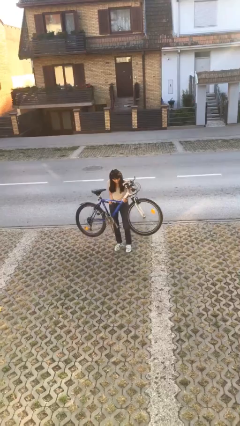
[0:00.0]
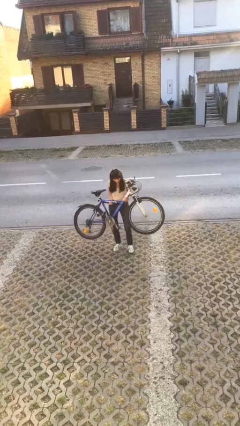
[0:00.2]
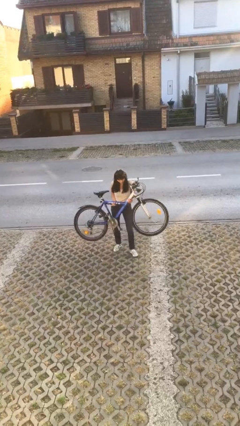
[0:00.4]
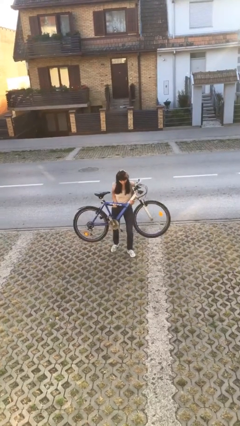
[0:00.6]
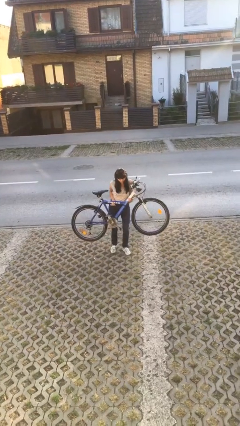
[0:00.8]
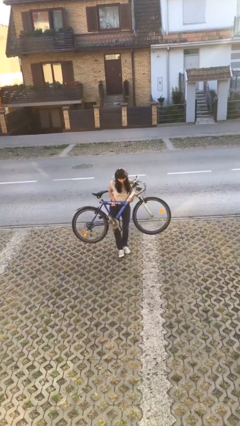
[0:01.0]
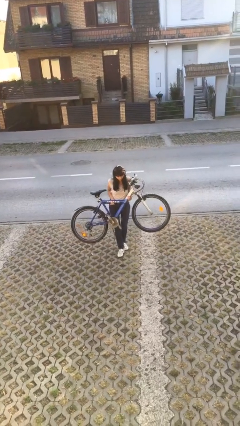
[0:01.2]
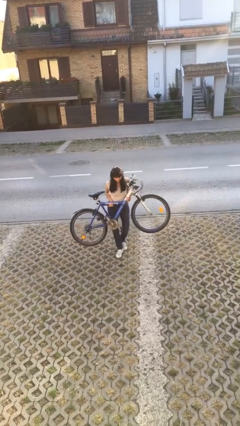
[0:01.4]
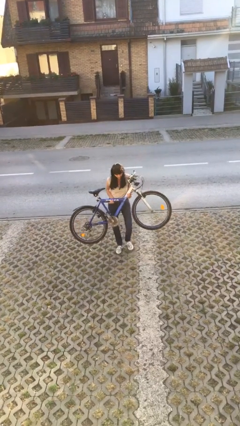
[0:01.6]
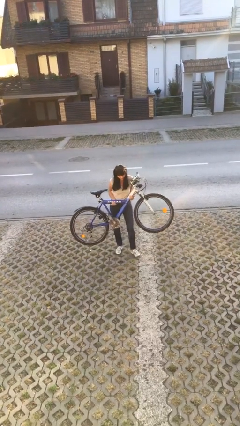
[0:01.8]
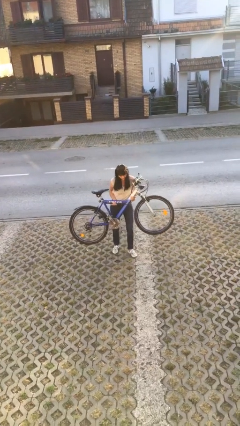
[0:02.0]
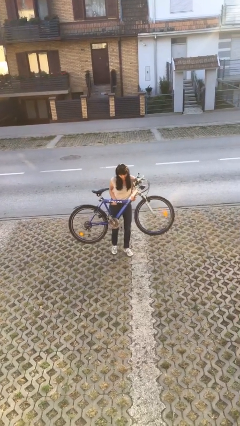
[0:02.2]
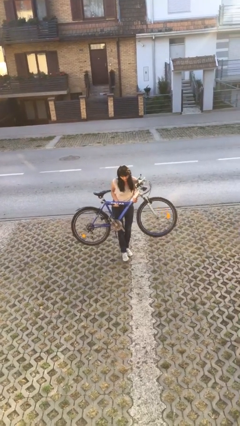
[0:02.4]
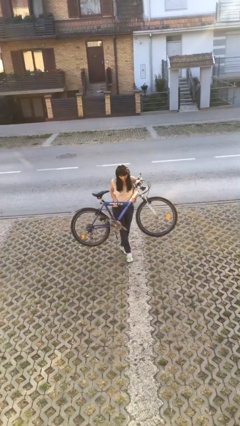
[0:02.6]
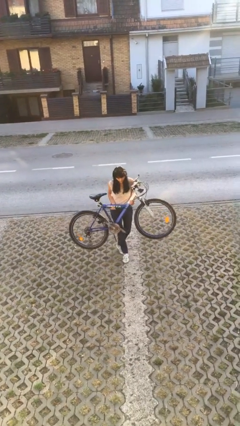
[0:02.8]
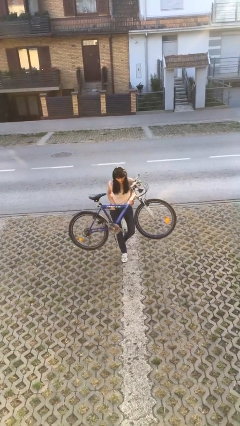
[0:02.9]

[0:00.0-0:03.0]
person carries heavy object

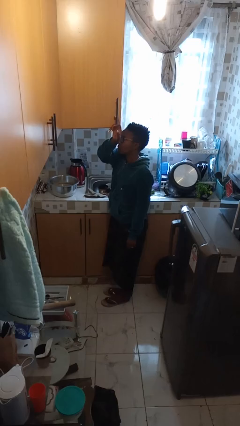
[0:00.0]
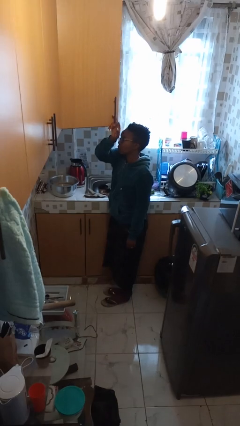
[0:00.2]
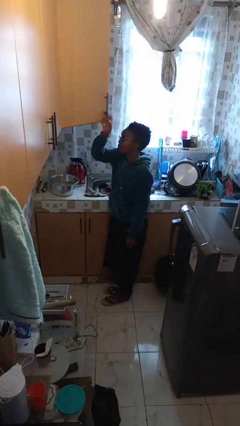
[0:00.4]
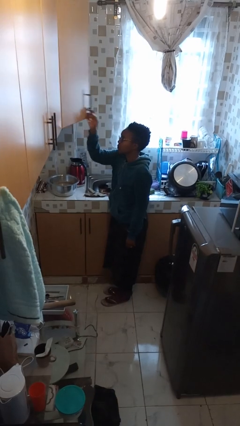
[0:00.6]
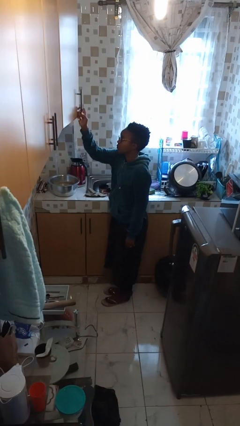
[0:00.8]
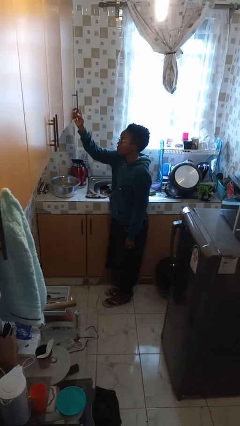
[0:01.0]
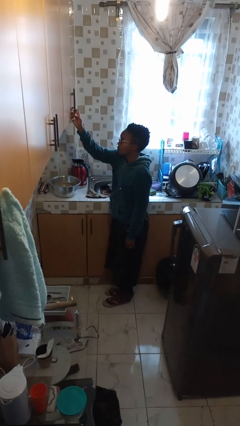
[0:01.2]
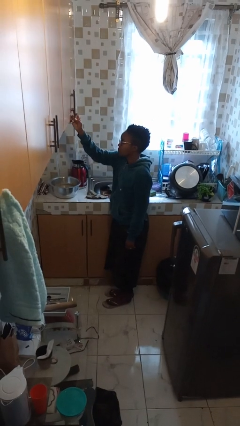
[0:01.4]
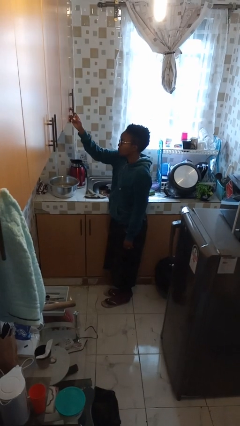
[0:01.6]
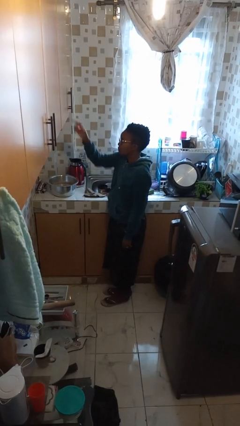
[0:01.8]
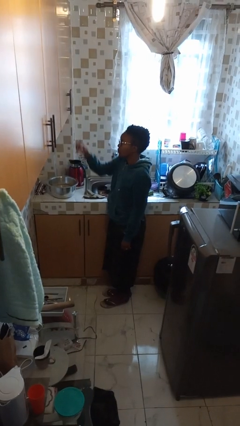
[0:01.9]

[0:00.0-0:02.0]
person closes cabinet

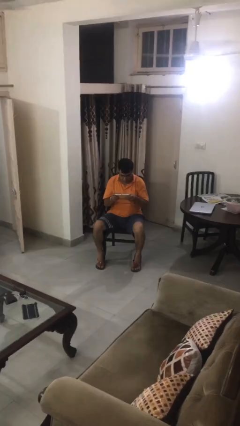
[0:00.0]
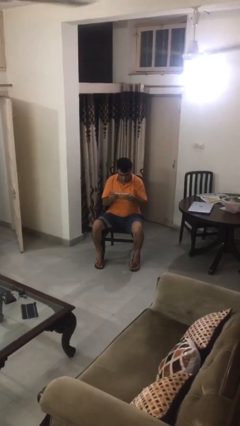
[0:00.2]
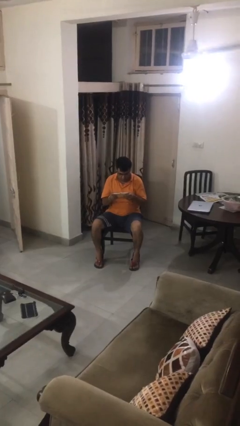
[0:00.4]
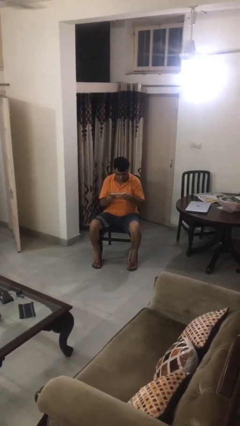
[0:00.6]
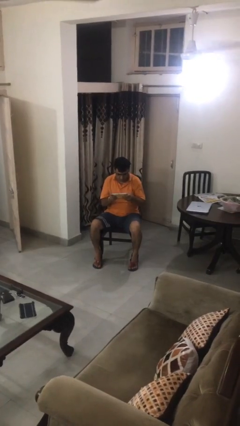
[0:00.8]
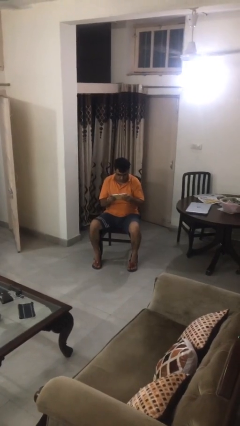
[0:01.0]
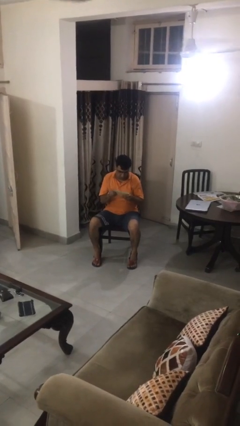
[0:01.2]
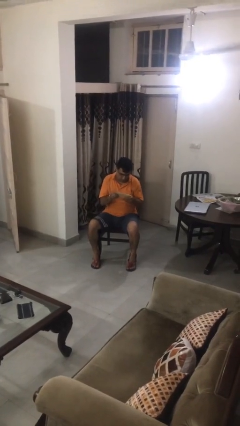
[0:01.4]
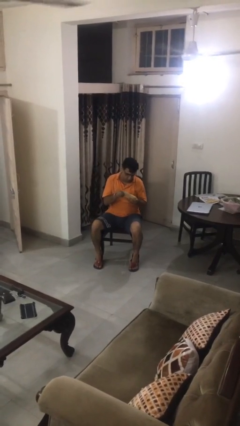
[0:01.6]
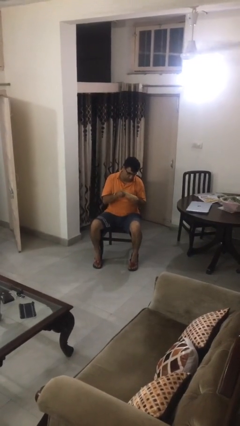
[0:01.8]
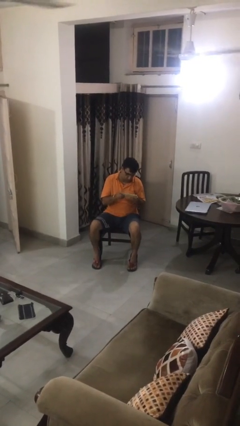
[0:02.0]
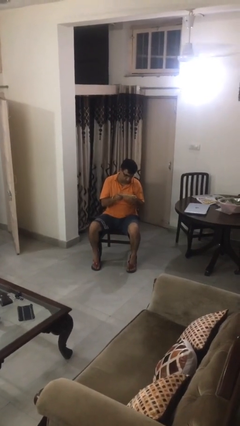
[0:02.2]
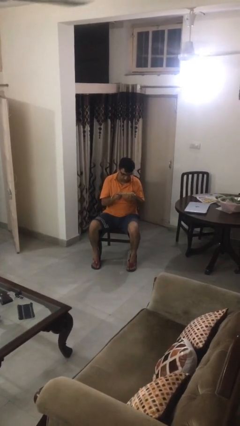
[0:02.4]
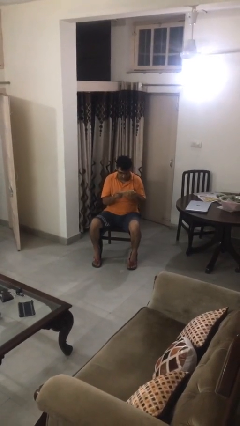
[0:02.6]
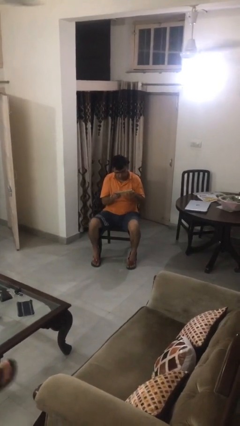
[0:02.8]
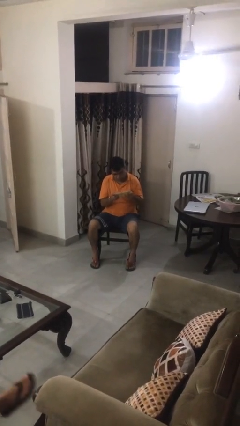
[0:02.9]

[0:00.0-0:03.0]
person interacts with handheld game

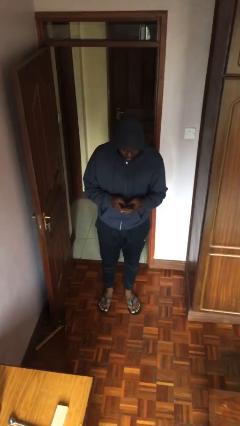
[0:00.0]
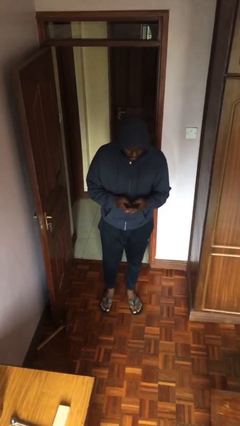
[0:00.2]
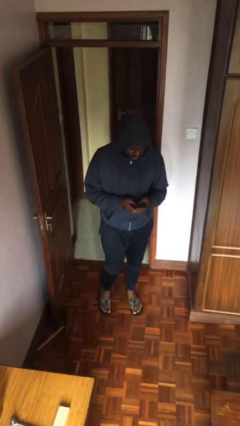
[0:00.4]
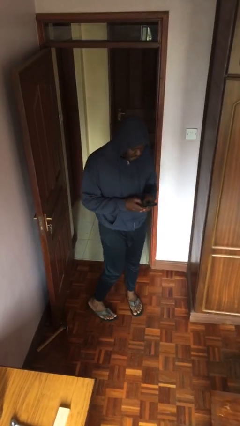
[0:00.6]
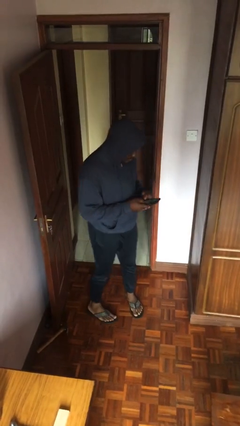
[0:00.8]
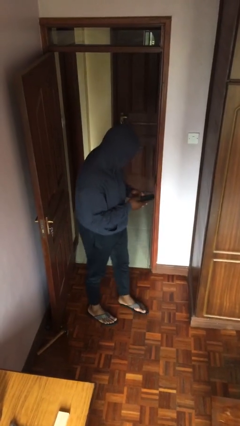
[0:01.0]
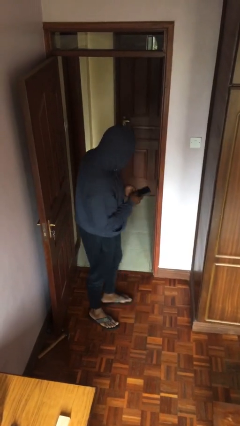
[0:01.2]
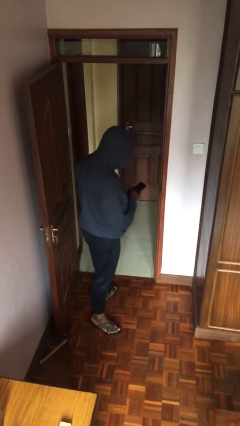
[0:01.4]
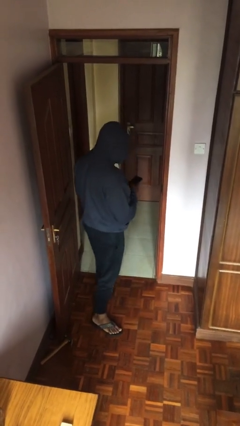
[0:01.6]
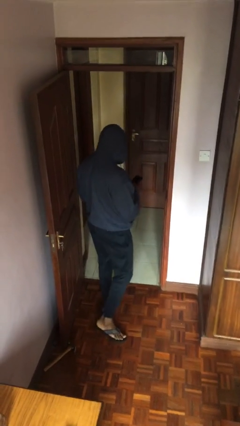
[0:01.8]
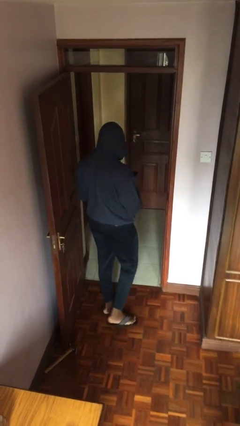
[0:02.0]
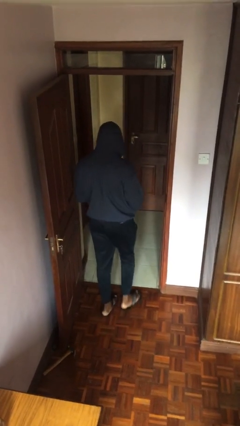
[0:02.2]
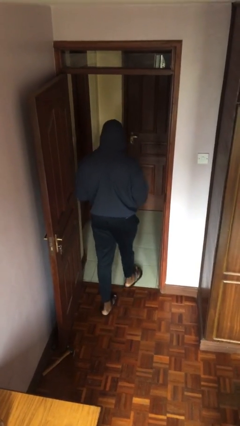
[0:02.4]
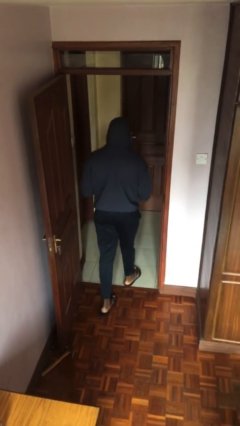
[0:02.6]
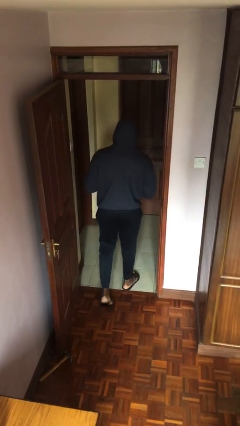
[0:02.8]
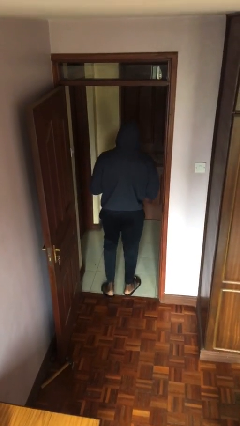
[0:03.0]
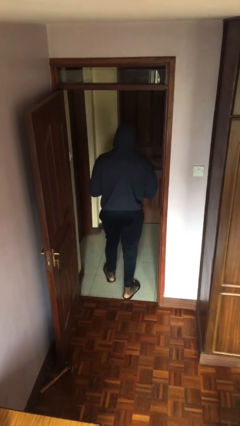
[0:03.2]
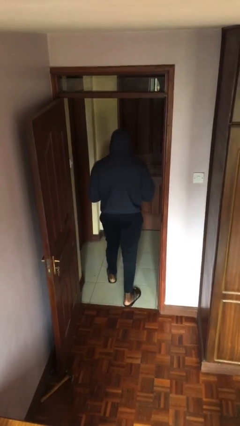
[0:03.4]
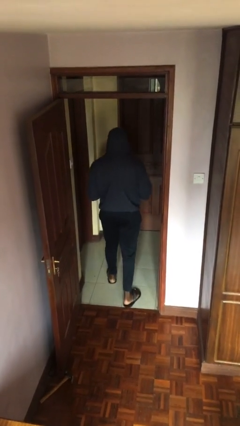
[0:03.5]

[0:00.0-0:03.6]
person exits scene through structure

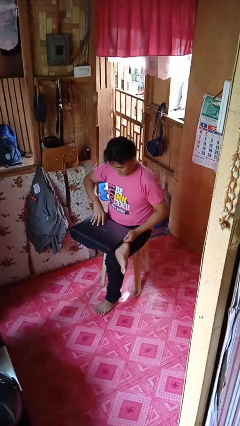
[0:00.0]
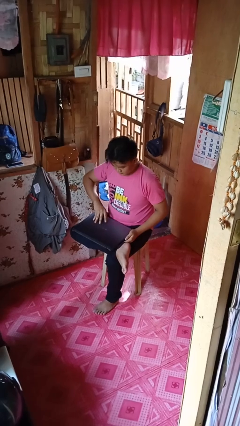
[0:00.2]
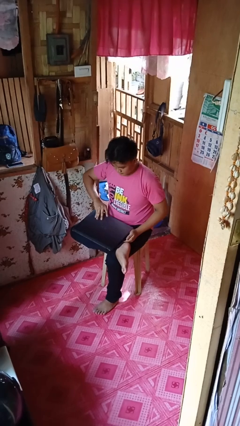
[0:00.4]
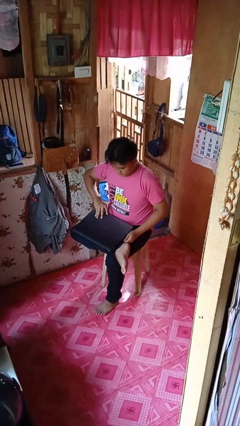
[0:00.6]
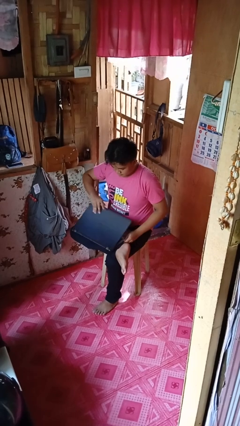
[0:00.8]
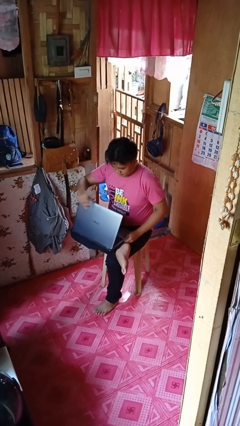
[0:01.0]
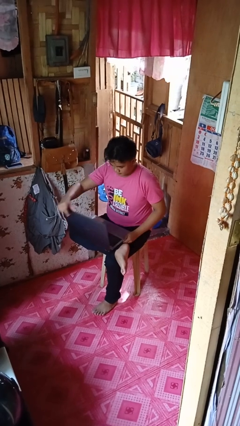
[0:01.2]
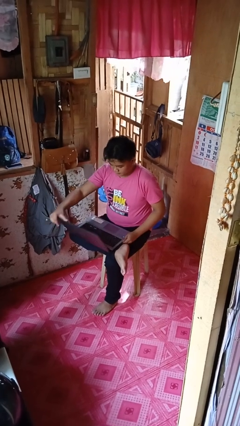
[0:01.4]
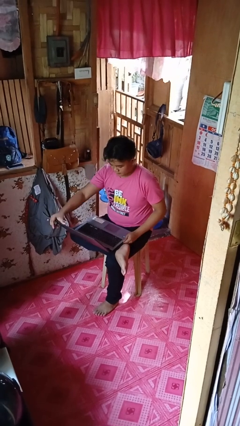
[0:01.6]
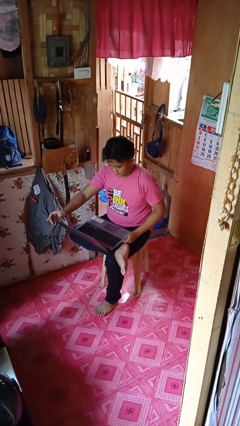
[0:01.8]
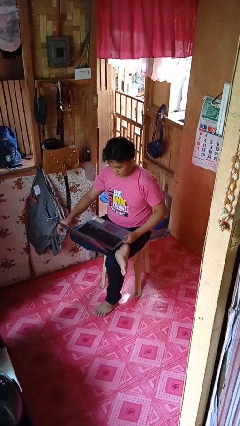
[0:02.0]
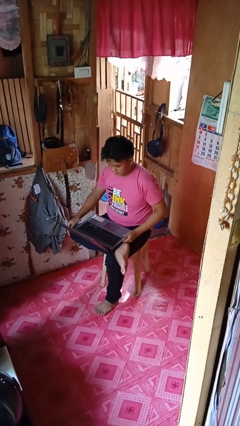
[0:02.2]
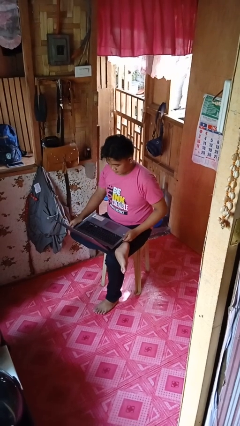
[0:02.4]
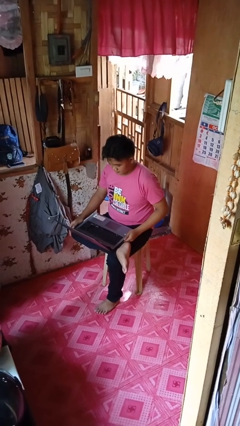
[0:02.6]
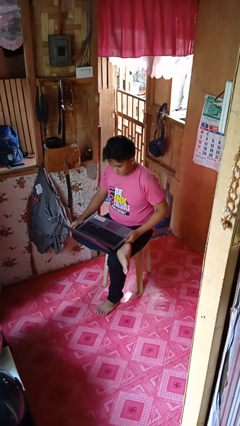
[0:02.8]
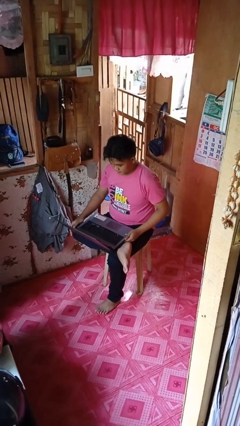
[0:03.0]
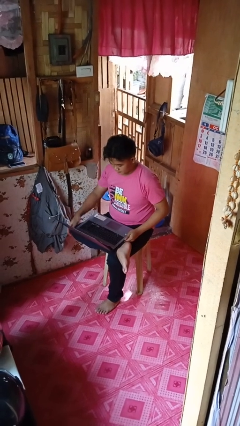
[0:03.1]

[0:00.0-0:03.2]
person opens laptop

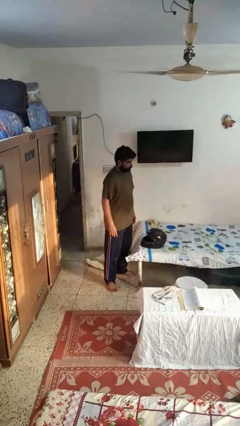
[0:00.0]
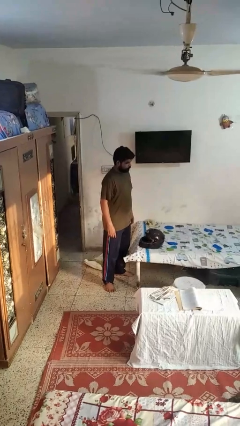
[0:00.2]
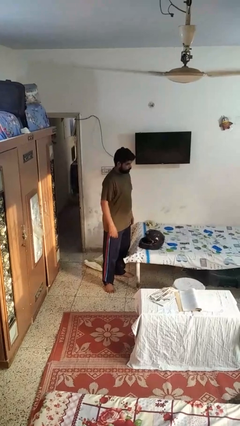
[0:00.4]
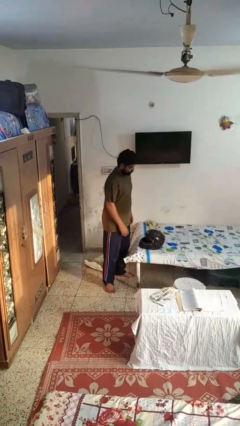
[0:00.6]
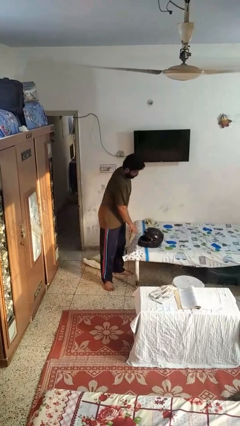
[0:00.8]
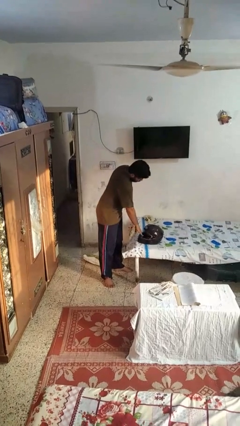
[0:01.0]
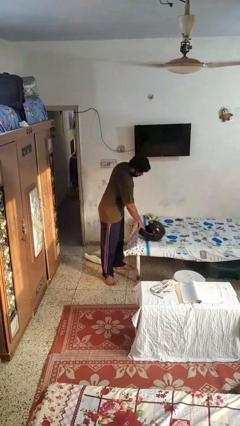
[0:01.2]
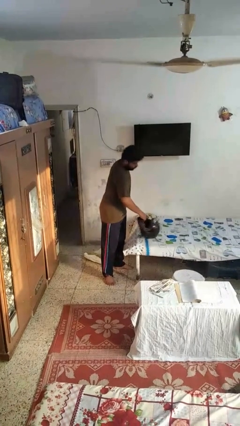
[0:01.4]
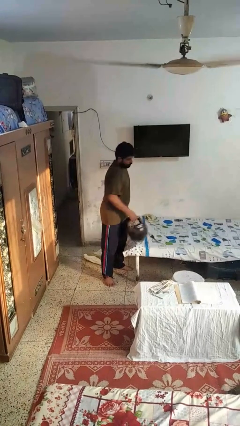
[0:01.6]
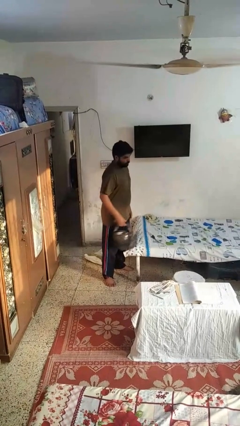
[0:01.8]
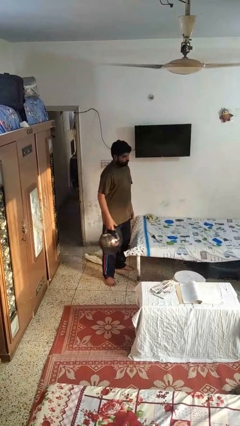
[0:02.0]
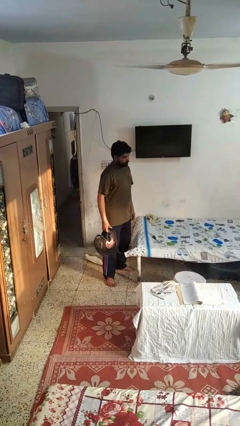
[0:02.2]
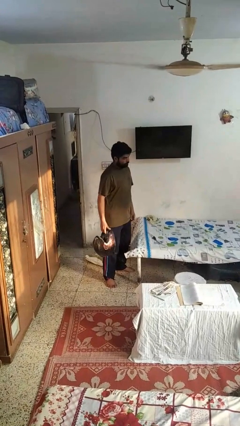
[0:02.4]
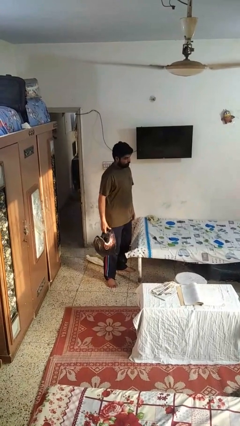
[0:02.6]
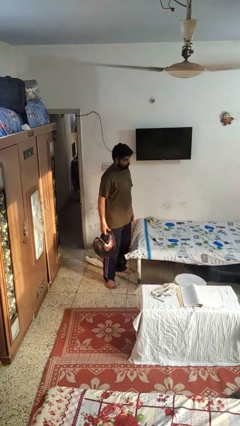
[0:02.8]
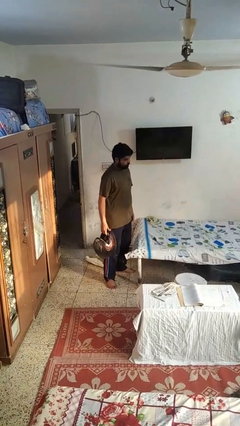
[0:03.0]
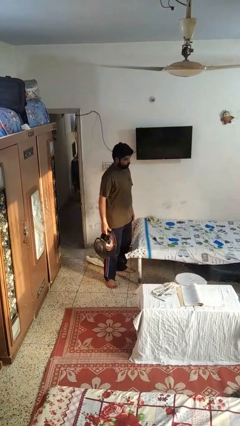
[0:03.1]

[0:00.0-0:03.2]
person picks up object from bed
